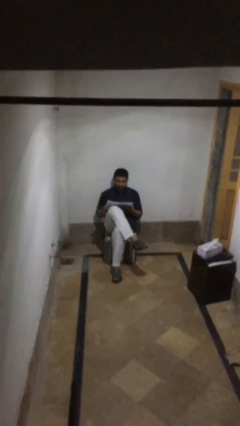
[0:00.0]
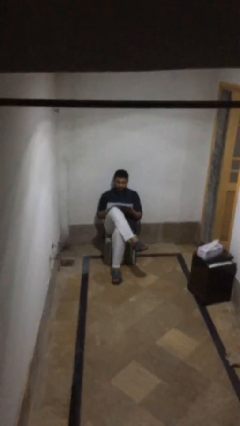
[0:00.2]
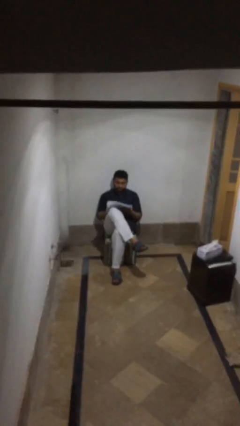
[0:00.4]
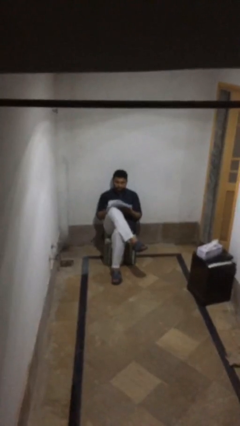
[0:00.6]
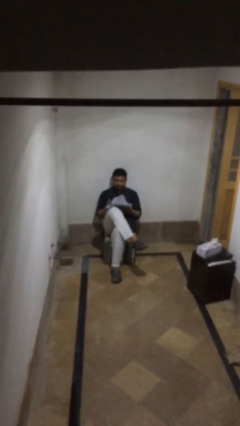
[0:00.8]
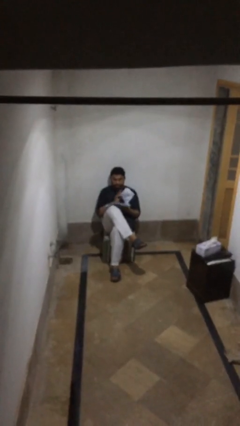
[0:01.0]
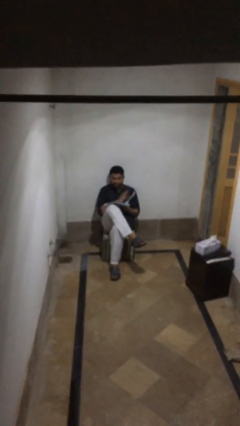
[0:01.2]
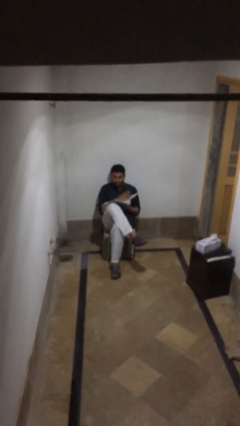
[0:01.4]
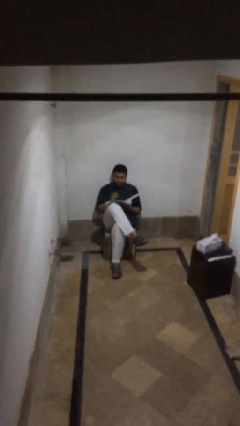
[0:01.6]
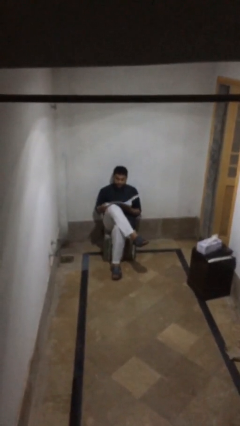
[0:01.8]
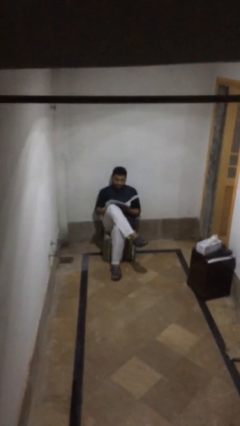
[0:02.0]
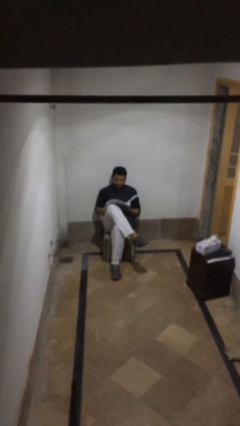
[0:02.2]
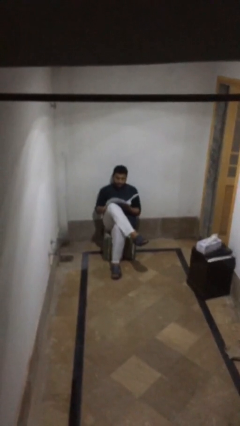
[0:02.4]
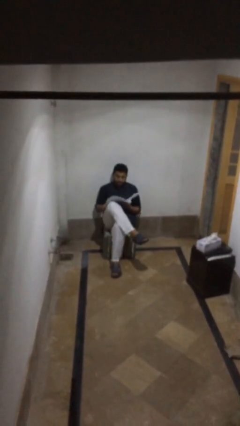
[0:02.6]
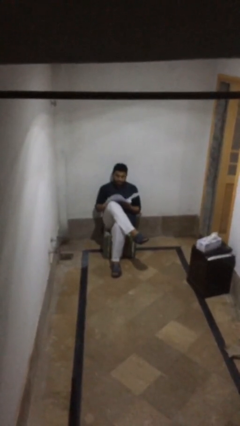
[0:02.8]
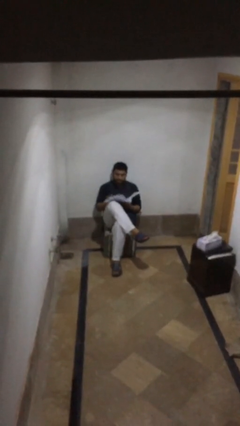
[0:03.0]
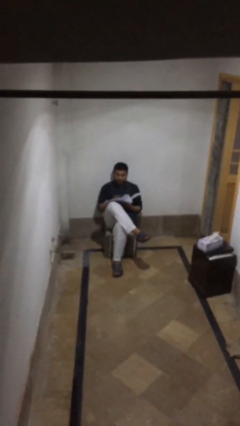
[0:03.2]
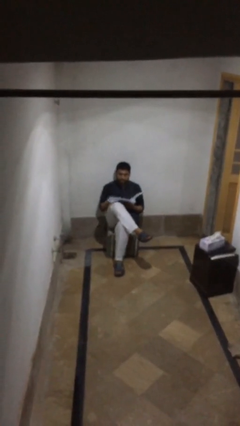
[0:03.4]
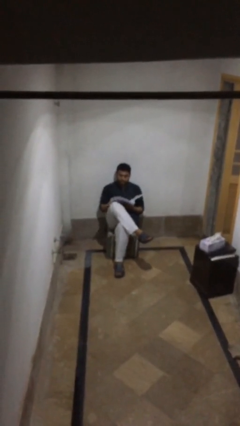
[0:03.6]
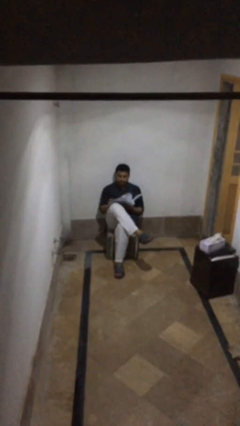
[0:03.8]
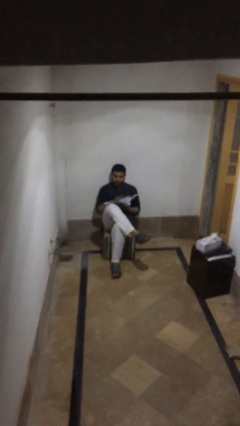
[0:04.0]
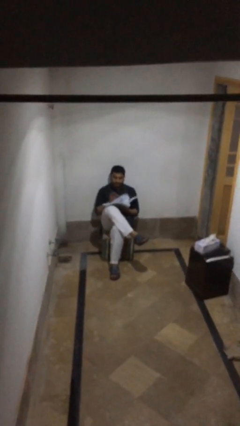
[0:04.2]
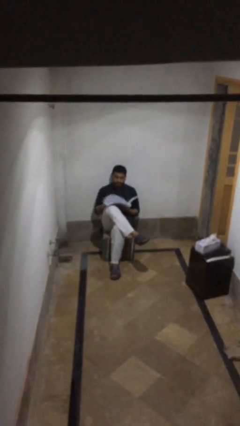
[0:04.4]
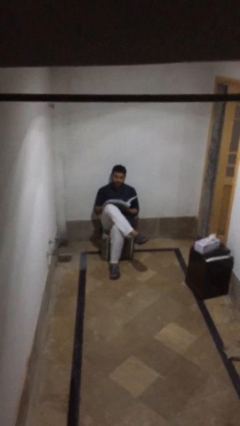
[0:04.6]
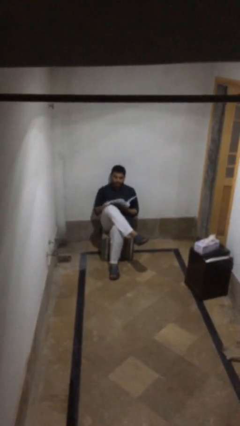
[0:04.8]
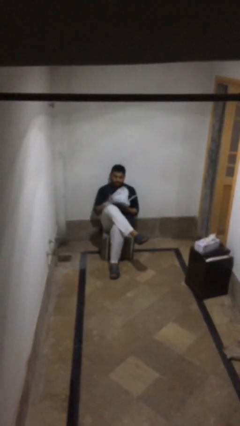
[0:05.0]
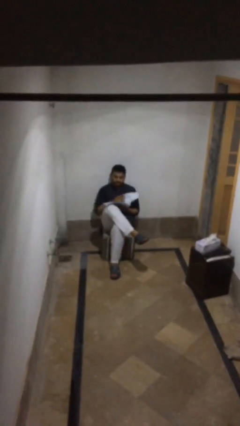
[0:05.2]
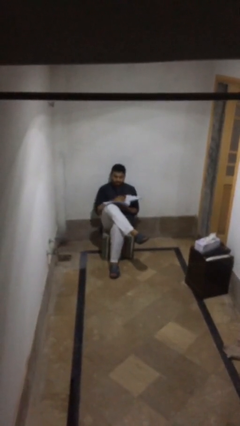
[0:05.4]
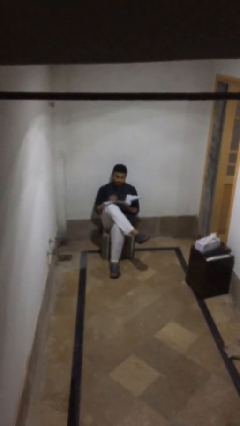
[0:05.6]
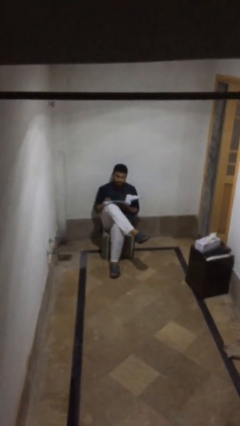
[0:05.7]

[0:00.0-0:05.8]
person reads document

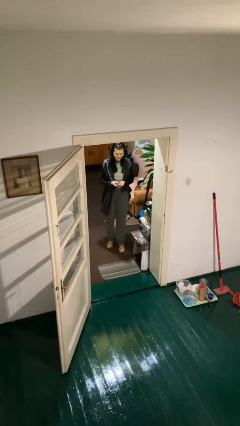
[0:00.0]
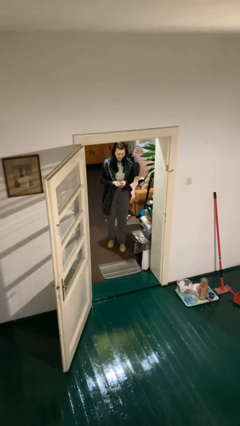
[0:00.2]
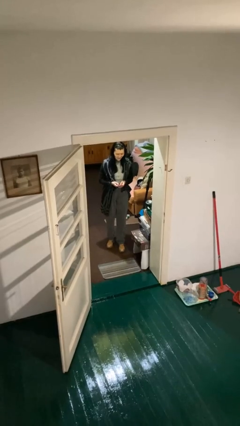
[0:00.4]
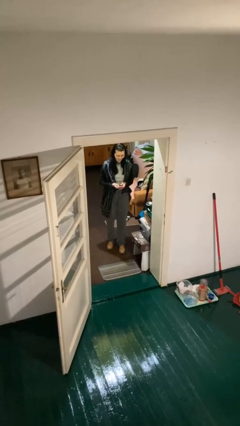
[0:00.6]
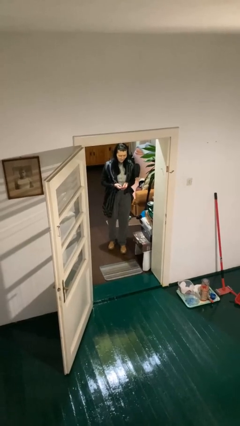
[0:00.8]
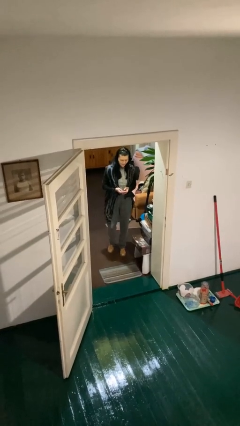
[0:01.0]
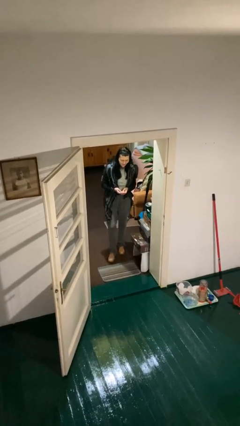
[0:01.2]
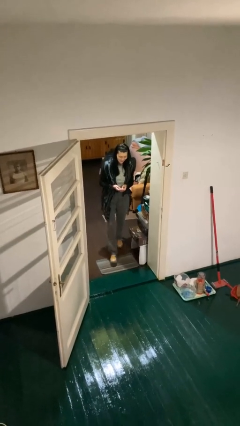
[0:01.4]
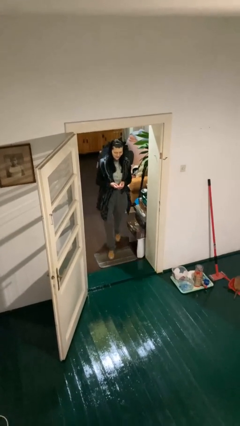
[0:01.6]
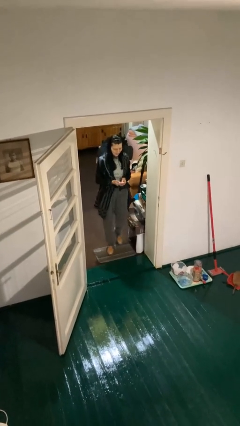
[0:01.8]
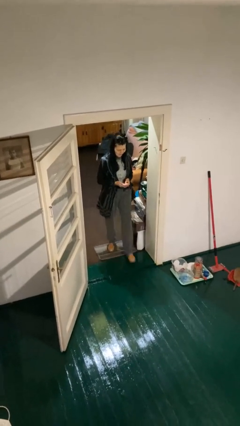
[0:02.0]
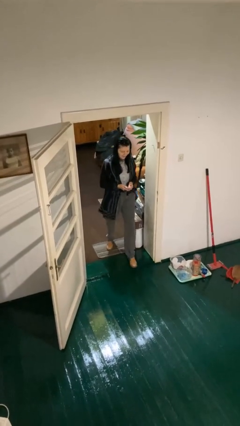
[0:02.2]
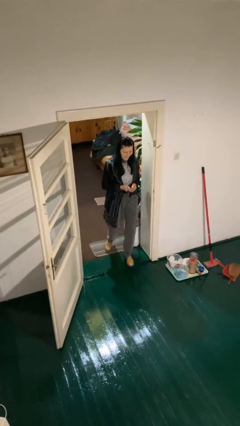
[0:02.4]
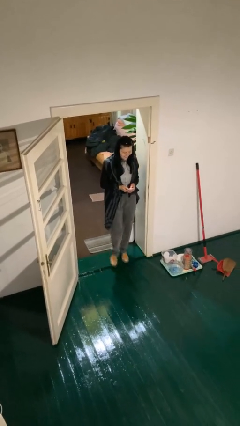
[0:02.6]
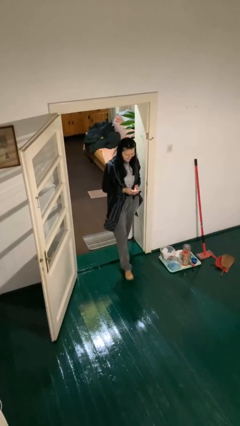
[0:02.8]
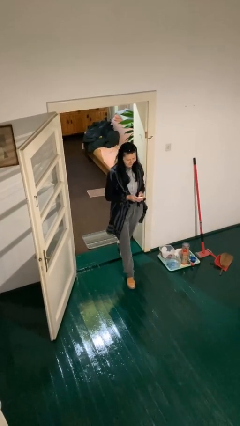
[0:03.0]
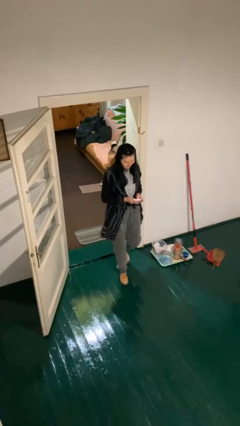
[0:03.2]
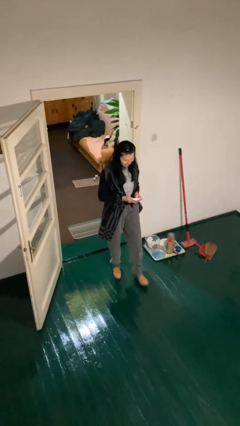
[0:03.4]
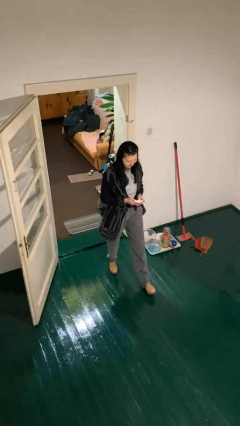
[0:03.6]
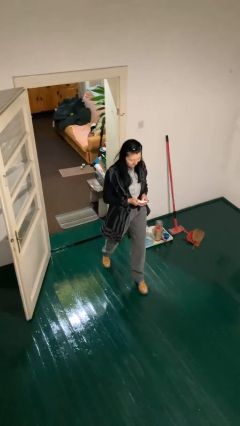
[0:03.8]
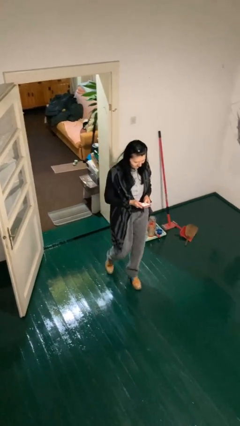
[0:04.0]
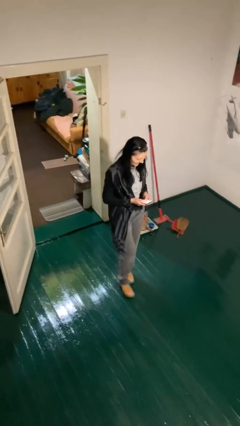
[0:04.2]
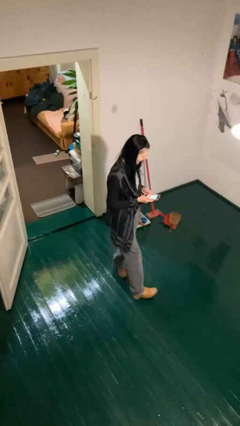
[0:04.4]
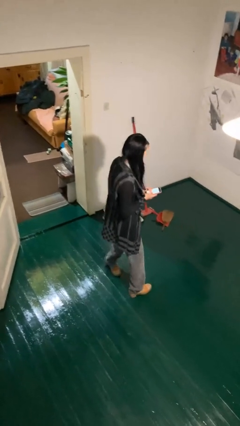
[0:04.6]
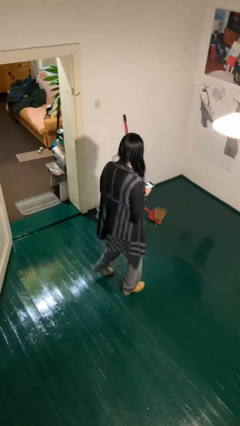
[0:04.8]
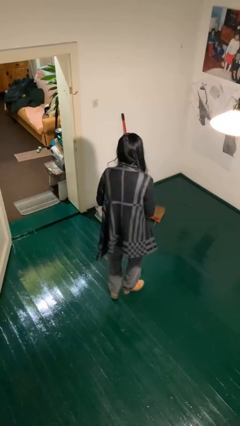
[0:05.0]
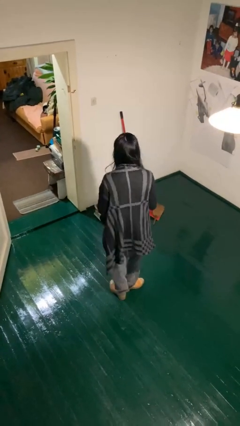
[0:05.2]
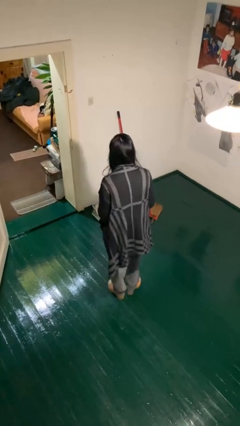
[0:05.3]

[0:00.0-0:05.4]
person enters scene through structure

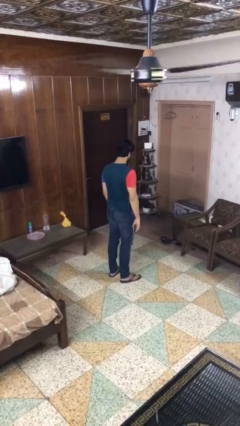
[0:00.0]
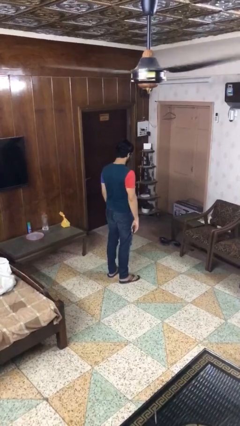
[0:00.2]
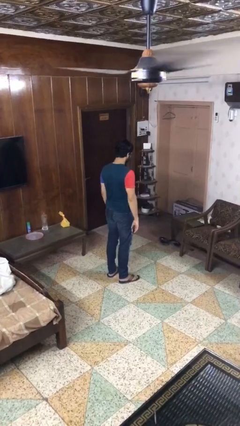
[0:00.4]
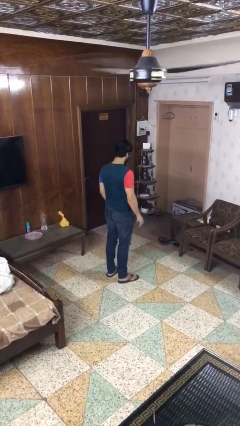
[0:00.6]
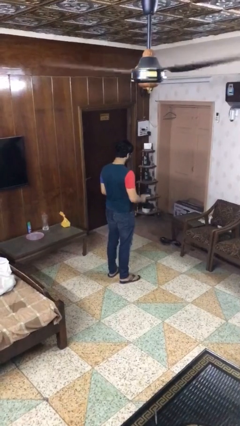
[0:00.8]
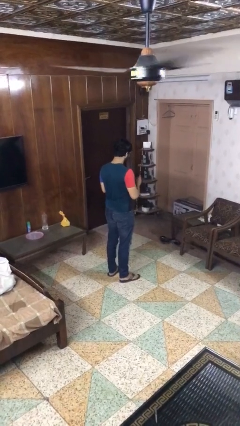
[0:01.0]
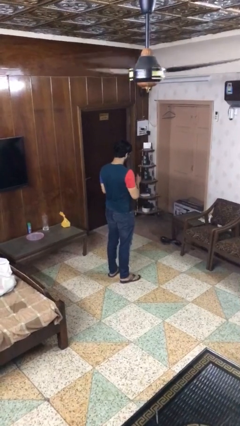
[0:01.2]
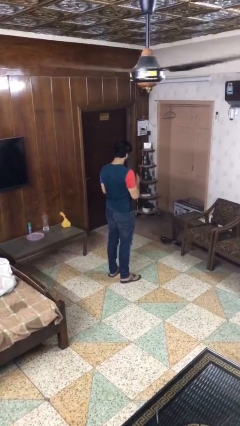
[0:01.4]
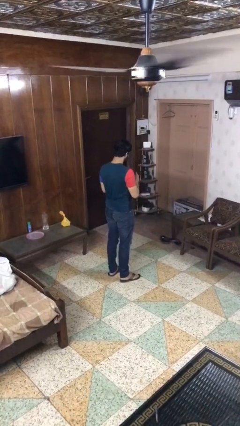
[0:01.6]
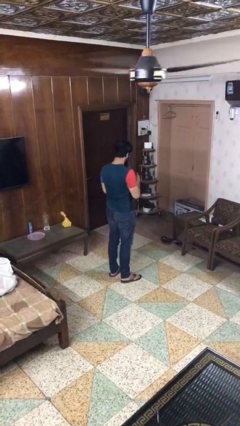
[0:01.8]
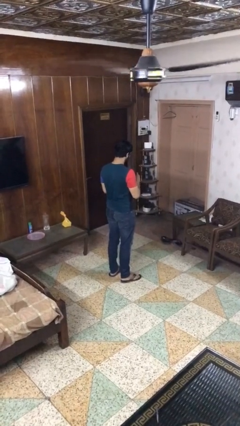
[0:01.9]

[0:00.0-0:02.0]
person clips fingernails

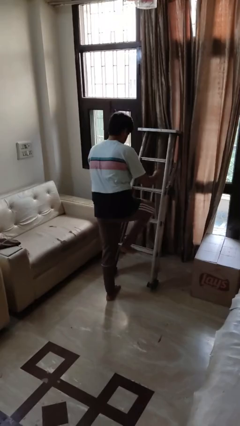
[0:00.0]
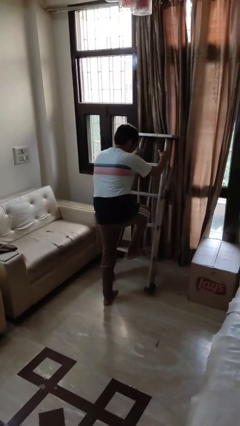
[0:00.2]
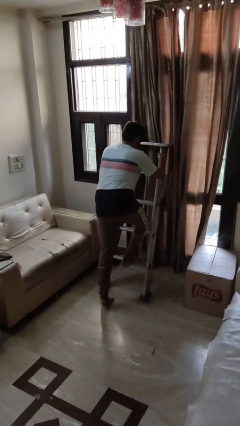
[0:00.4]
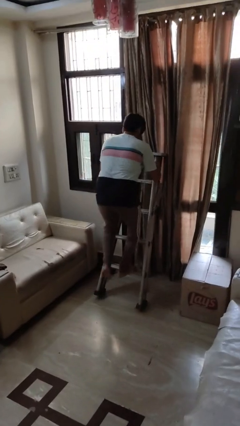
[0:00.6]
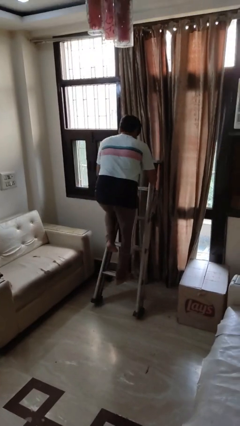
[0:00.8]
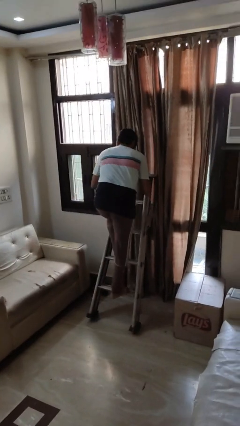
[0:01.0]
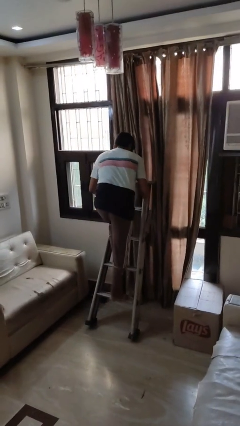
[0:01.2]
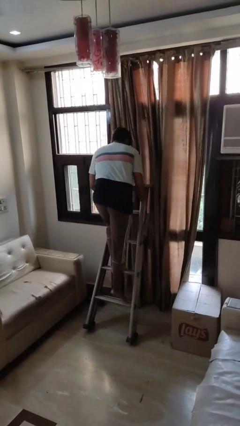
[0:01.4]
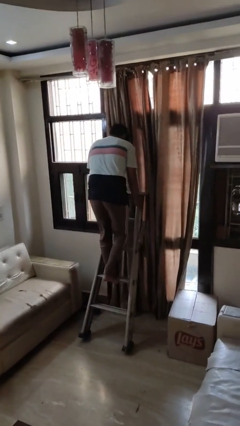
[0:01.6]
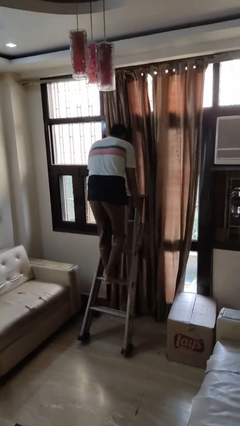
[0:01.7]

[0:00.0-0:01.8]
person climbs up ladder

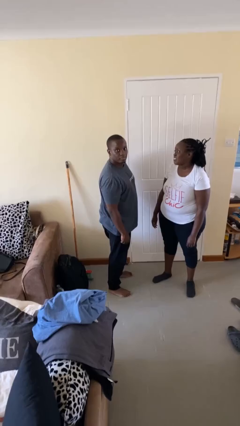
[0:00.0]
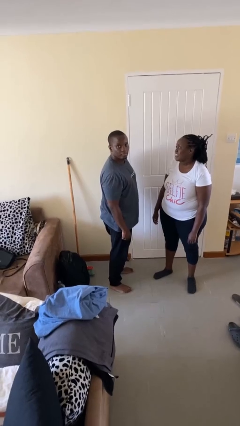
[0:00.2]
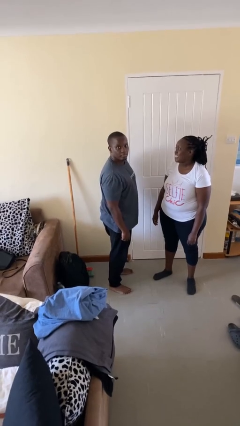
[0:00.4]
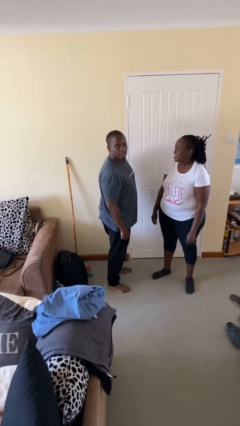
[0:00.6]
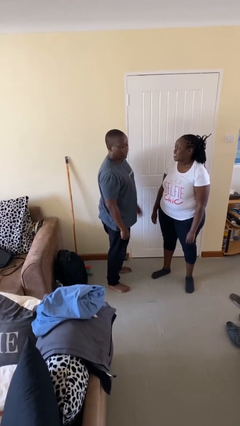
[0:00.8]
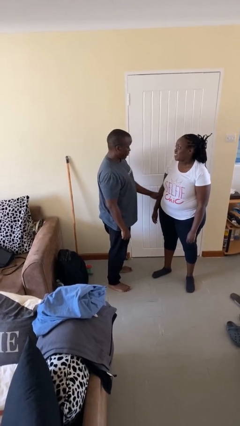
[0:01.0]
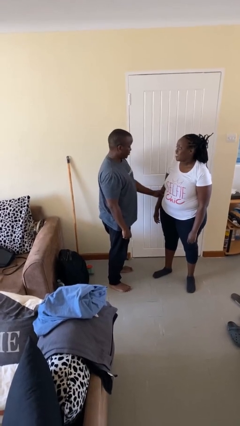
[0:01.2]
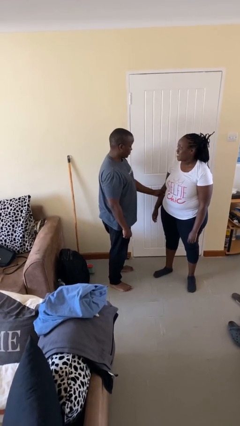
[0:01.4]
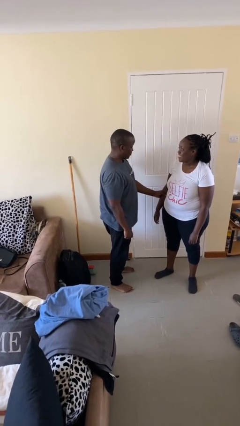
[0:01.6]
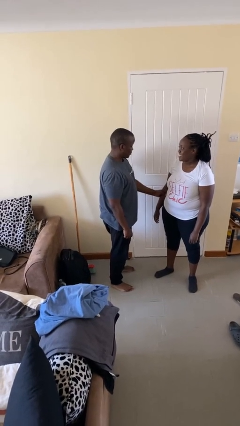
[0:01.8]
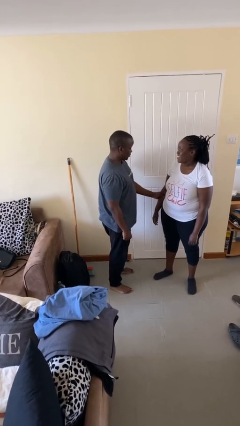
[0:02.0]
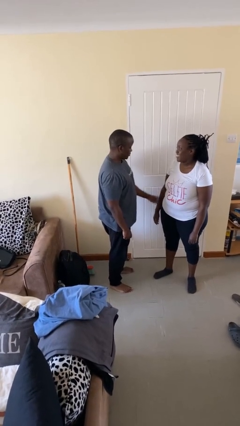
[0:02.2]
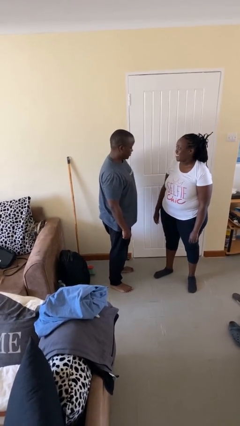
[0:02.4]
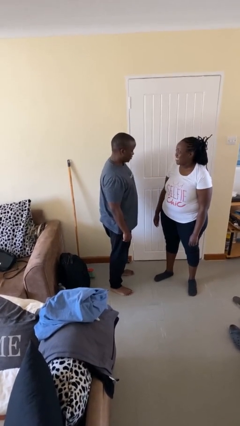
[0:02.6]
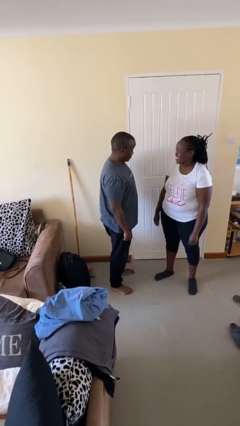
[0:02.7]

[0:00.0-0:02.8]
person grabs person by forearm
